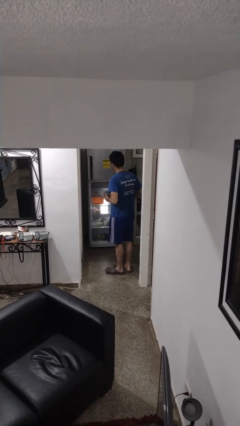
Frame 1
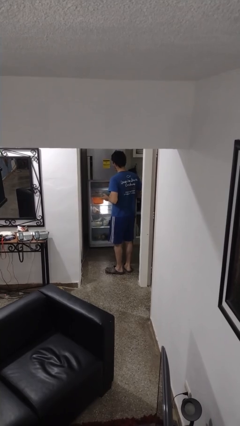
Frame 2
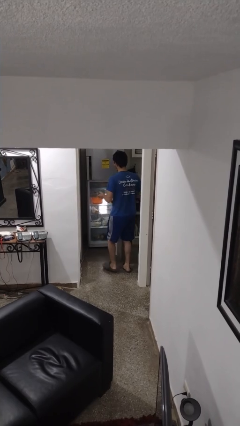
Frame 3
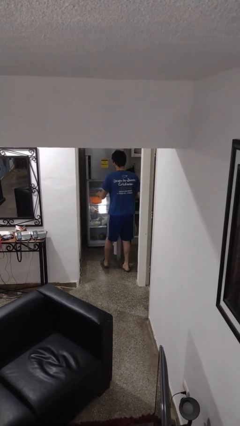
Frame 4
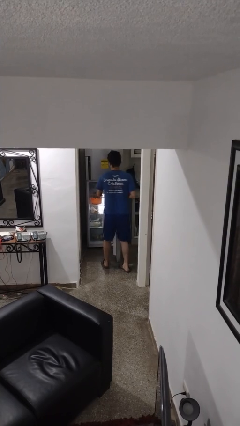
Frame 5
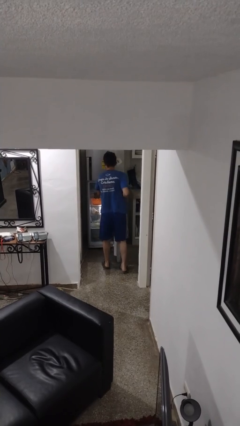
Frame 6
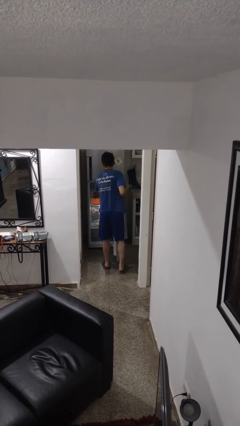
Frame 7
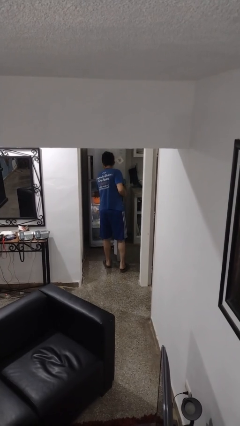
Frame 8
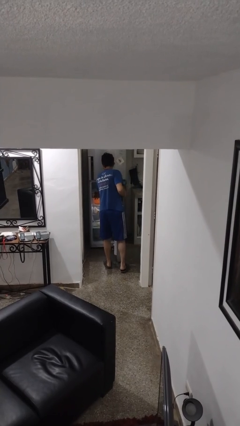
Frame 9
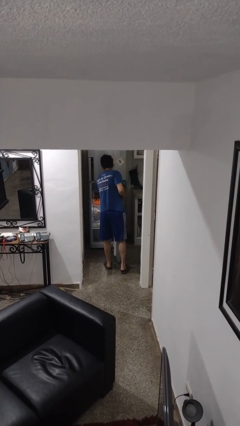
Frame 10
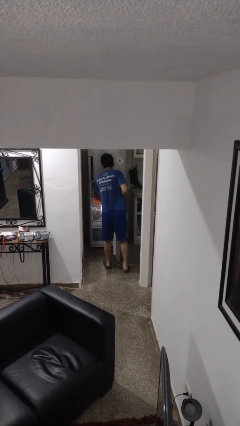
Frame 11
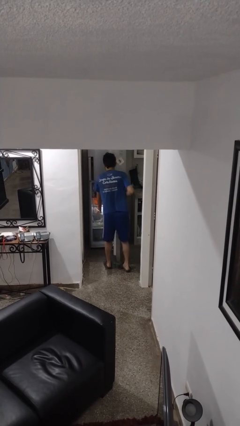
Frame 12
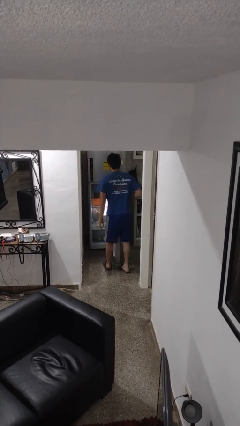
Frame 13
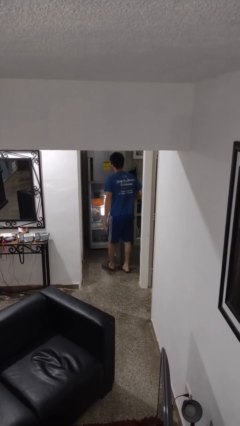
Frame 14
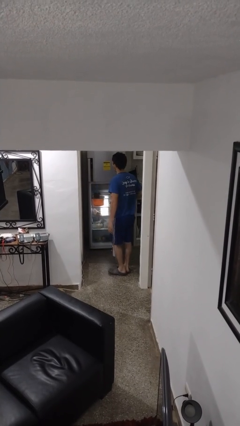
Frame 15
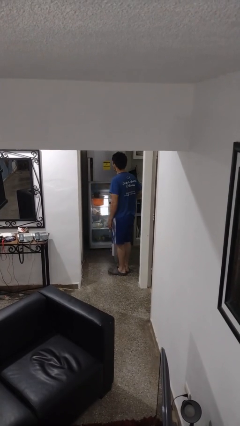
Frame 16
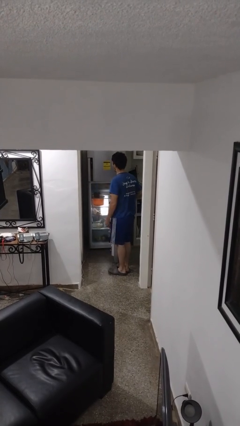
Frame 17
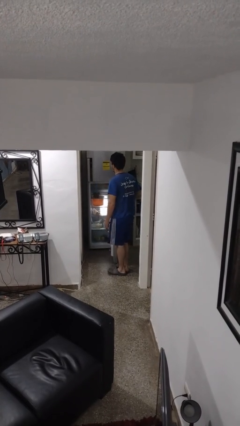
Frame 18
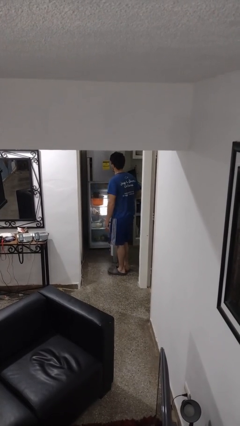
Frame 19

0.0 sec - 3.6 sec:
person puts object into refrigerator

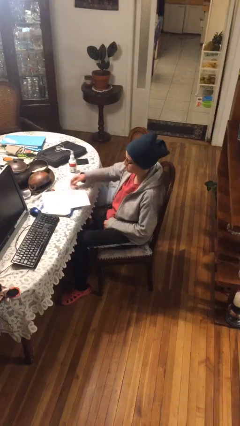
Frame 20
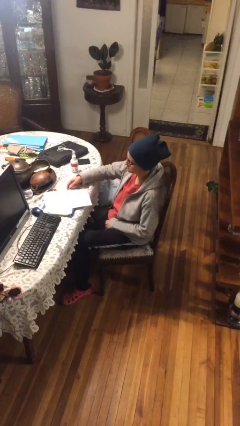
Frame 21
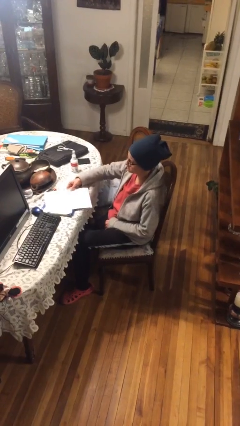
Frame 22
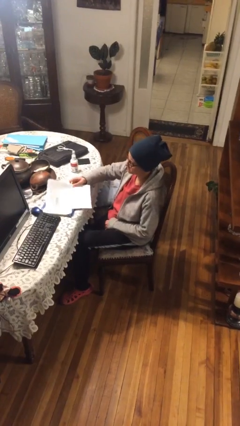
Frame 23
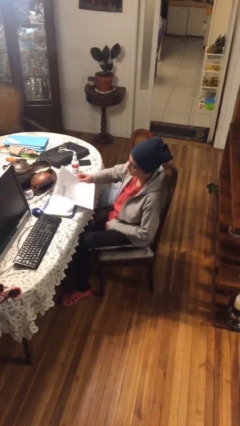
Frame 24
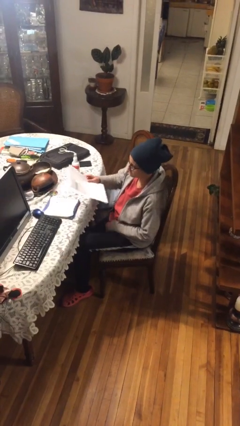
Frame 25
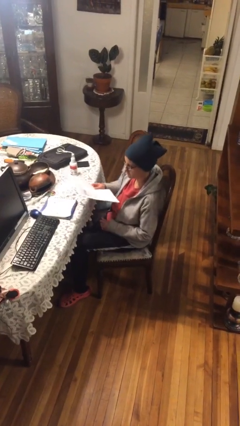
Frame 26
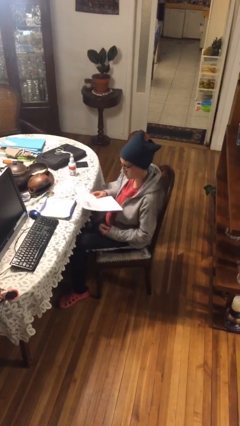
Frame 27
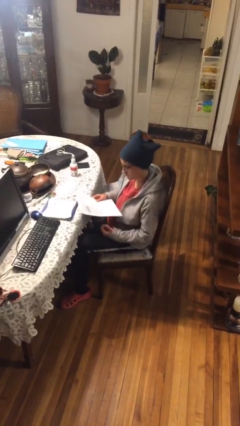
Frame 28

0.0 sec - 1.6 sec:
person picks up object from table

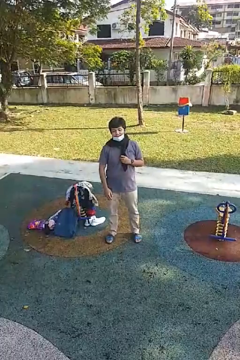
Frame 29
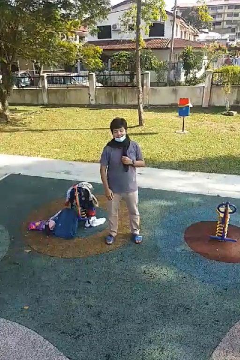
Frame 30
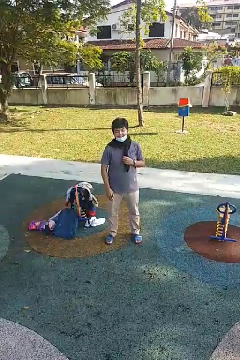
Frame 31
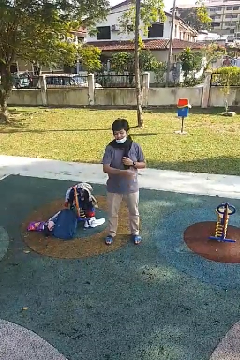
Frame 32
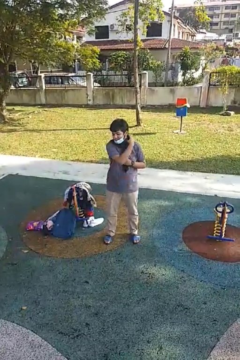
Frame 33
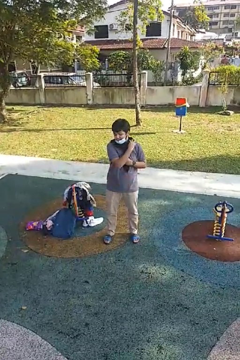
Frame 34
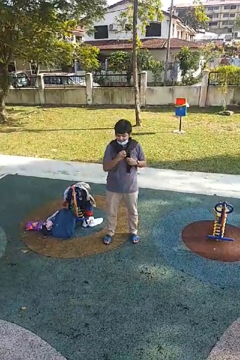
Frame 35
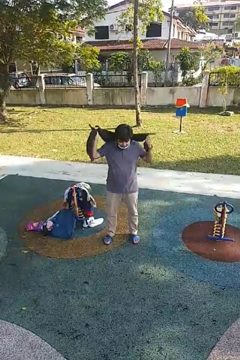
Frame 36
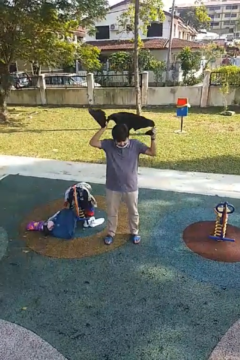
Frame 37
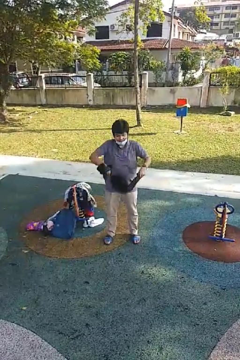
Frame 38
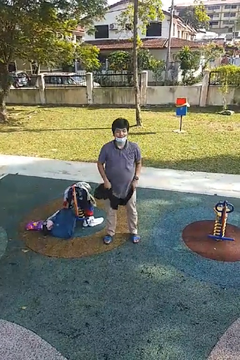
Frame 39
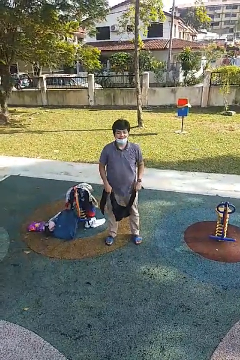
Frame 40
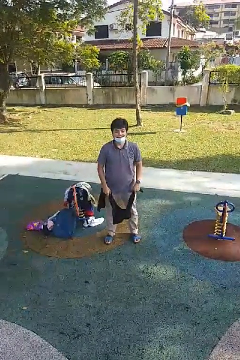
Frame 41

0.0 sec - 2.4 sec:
person takes off scarf

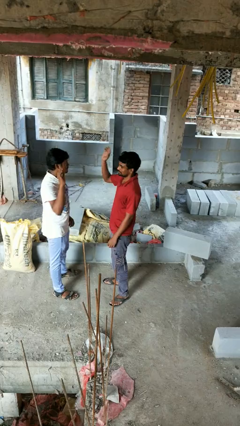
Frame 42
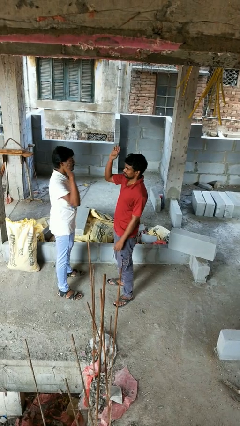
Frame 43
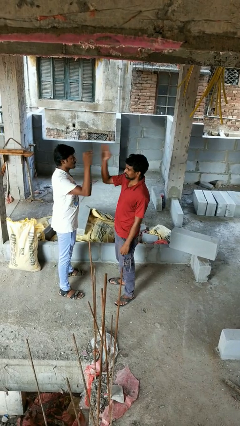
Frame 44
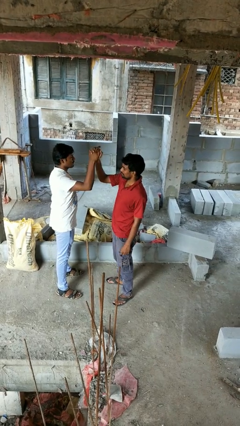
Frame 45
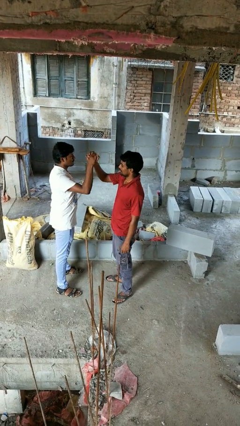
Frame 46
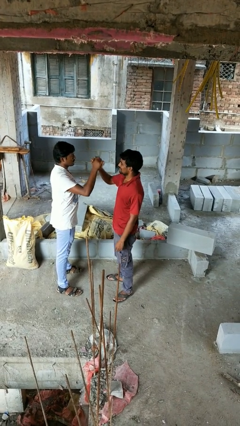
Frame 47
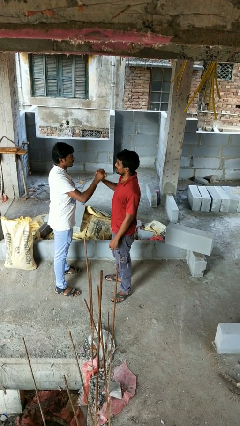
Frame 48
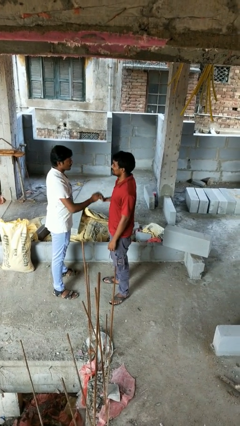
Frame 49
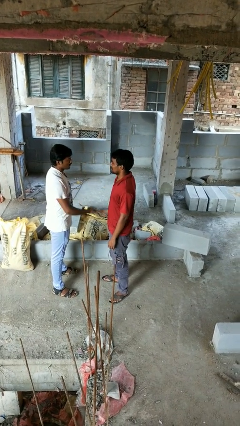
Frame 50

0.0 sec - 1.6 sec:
person highfives hand

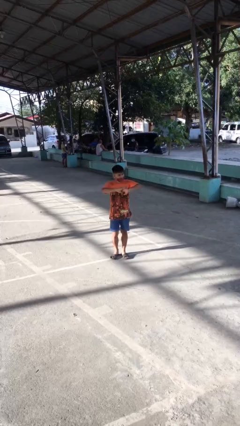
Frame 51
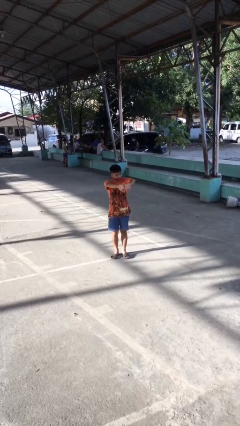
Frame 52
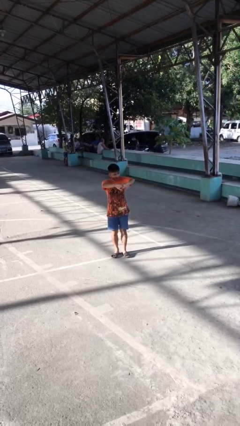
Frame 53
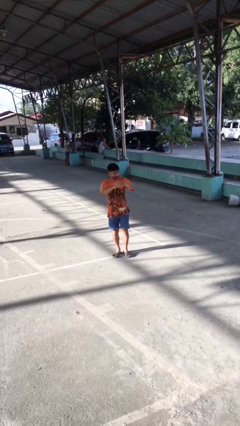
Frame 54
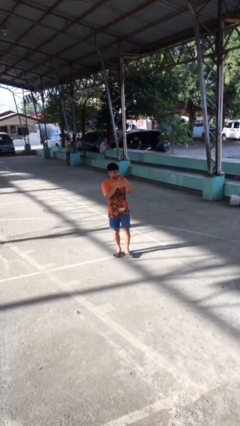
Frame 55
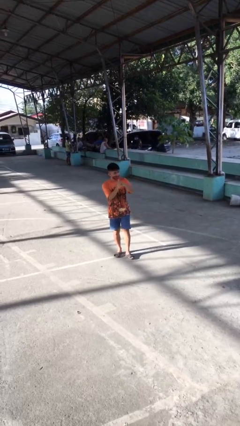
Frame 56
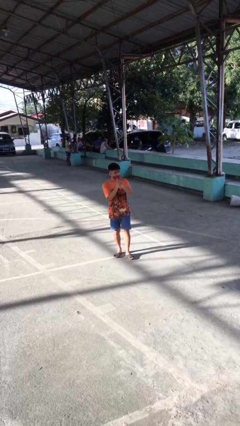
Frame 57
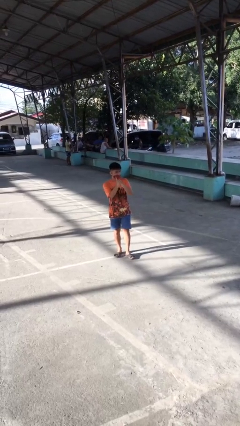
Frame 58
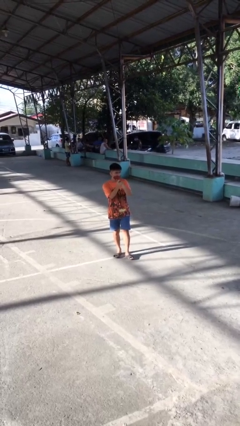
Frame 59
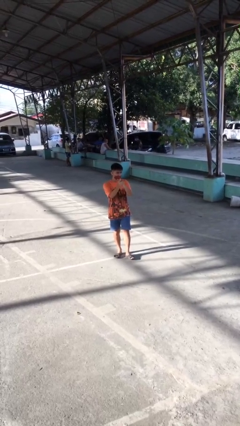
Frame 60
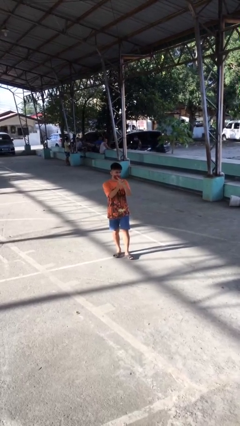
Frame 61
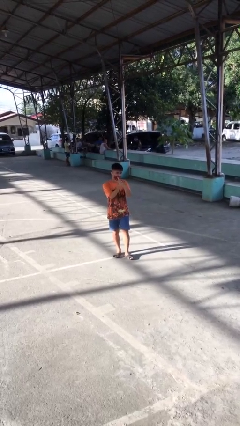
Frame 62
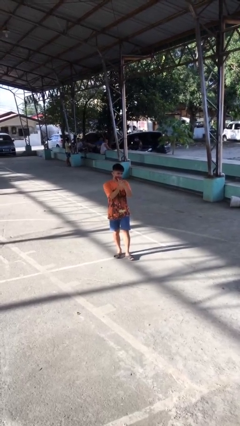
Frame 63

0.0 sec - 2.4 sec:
person cracks knuckles

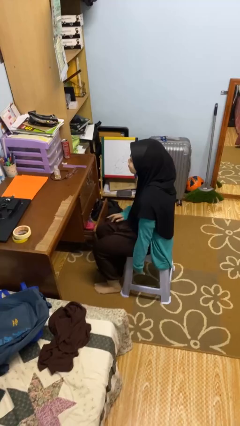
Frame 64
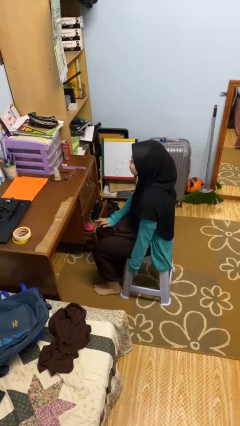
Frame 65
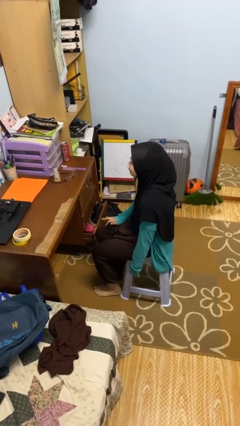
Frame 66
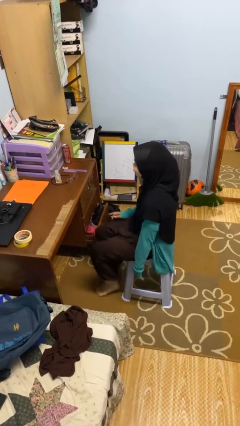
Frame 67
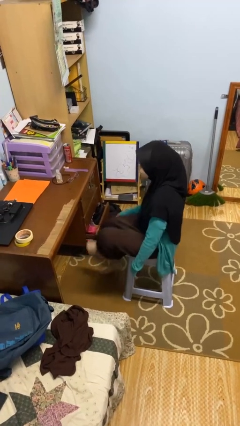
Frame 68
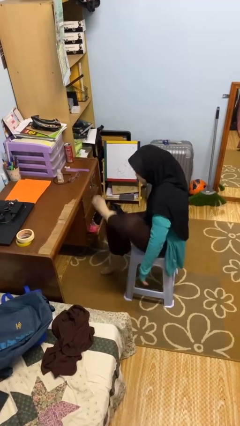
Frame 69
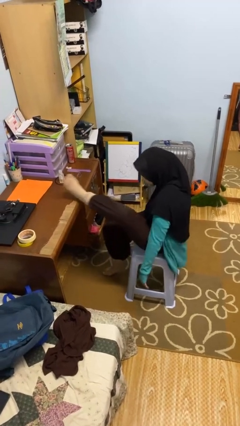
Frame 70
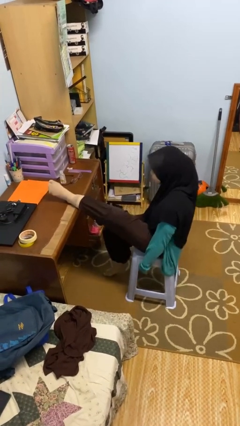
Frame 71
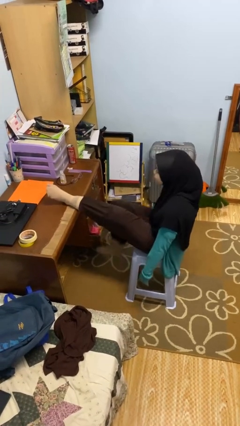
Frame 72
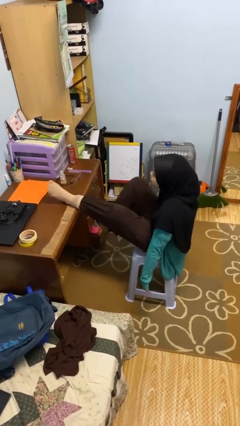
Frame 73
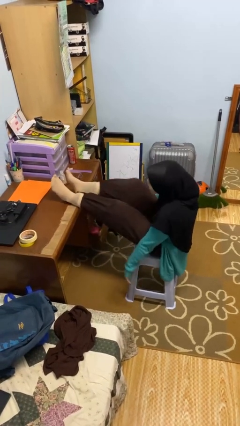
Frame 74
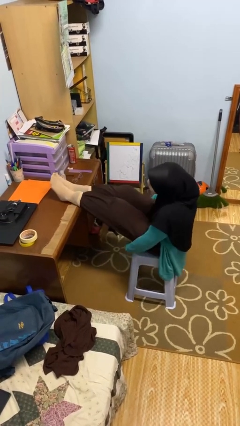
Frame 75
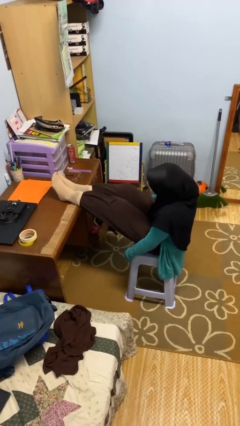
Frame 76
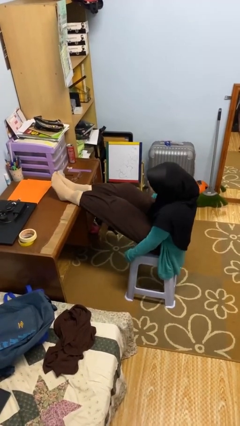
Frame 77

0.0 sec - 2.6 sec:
person puts feet up

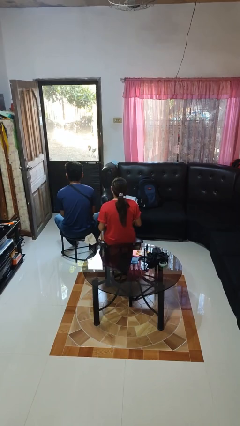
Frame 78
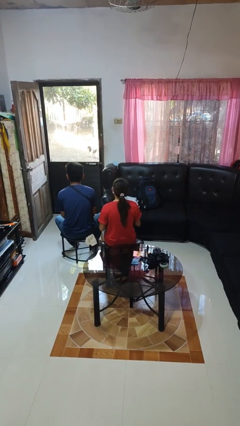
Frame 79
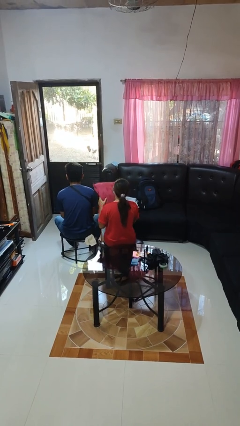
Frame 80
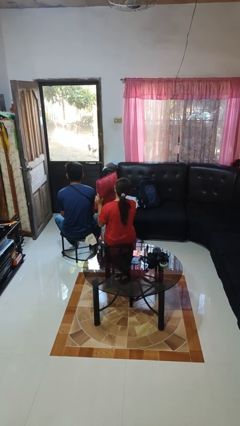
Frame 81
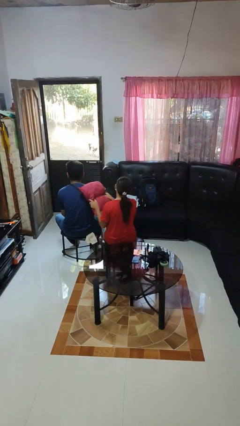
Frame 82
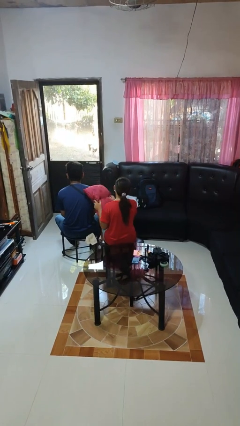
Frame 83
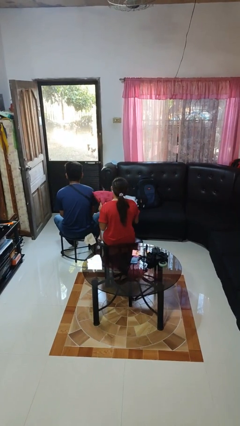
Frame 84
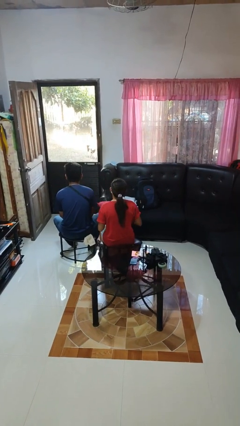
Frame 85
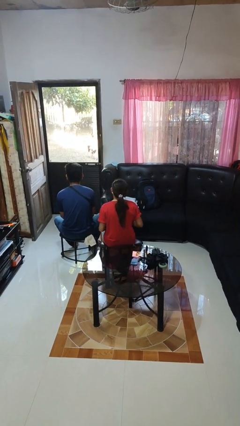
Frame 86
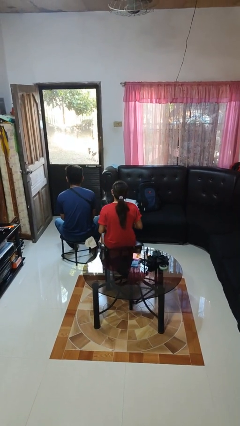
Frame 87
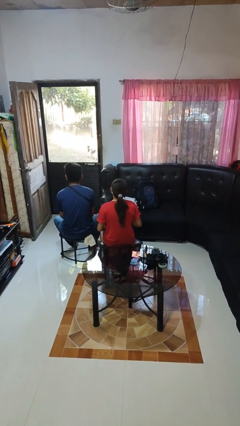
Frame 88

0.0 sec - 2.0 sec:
person hits person with pillow

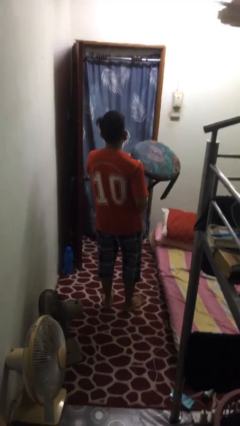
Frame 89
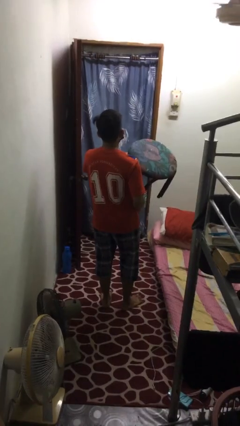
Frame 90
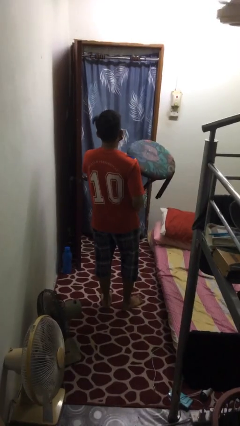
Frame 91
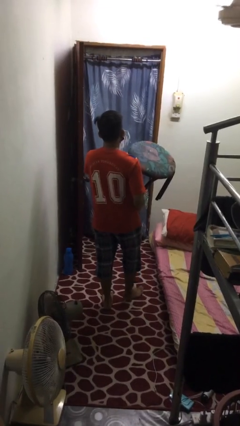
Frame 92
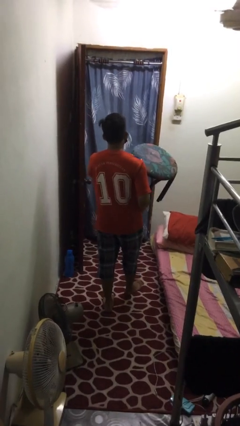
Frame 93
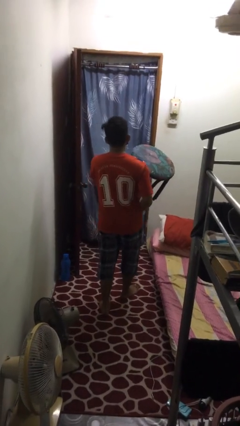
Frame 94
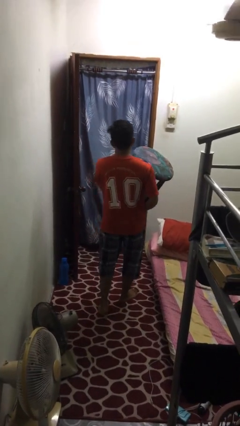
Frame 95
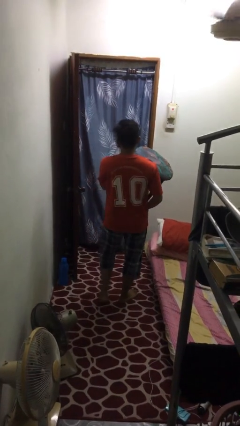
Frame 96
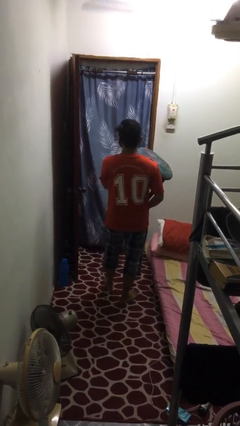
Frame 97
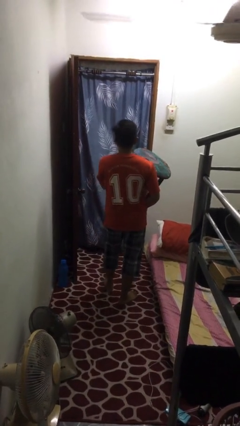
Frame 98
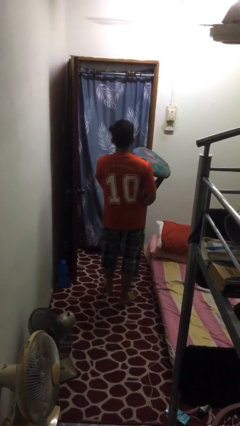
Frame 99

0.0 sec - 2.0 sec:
person carries furniture
